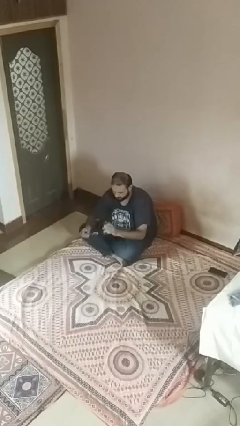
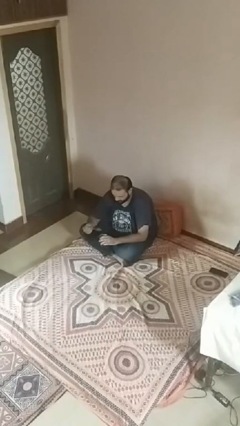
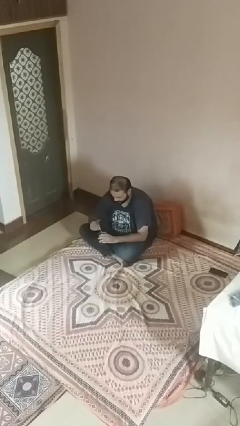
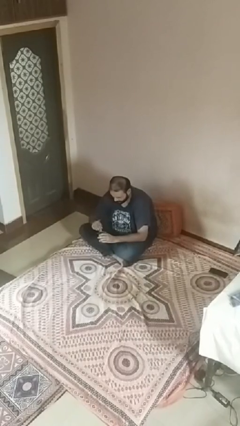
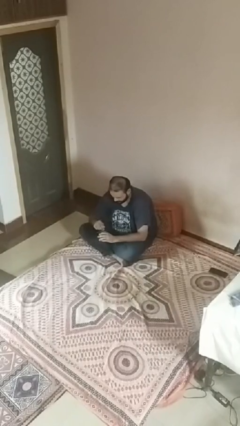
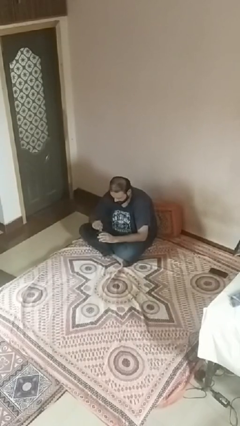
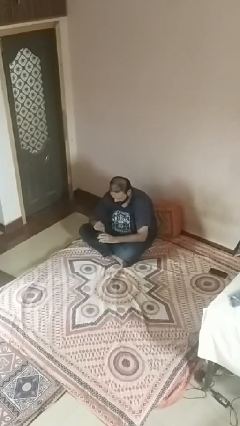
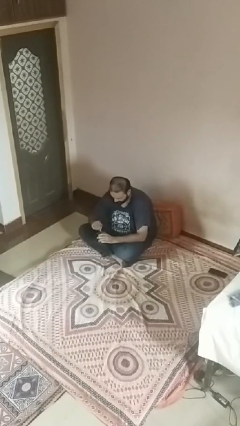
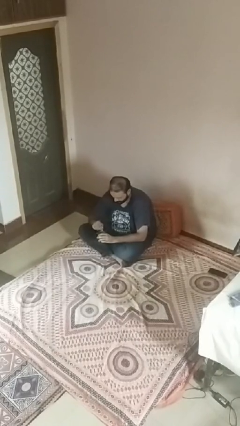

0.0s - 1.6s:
person stirs mug

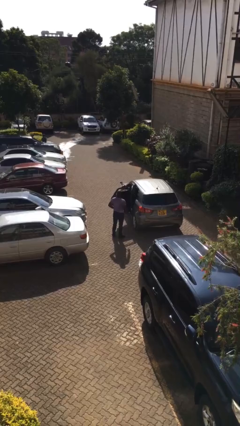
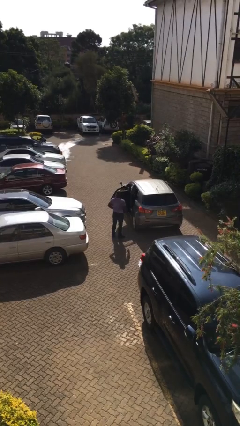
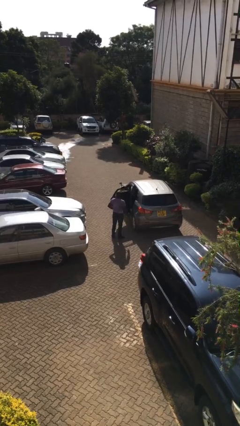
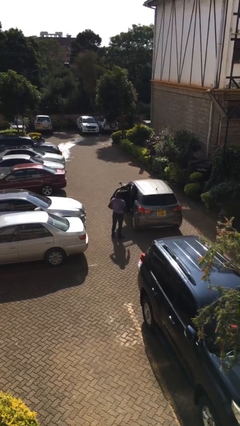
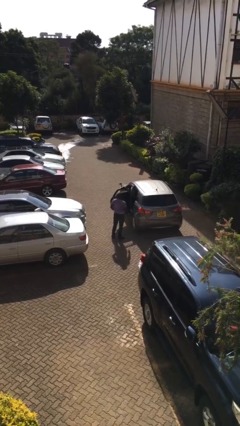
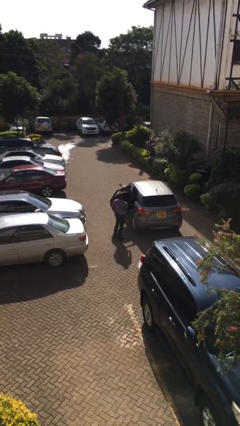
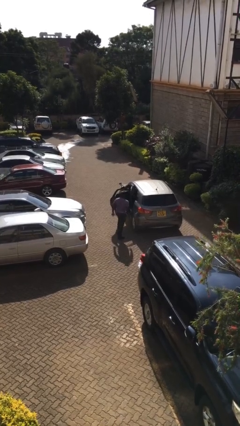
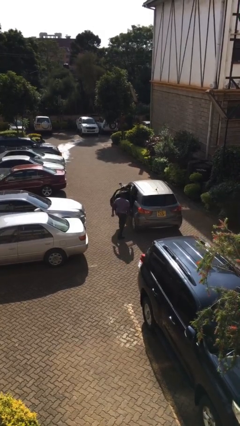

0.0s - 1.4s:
person exits car

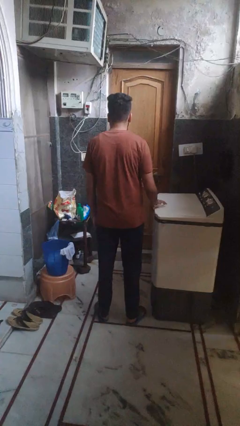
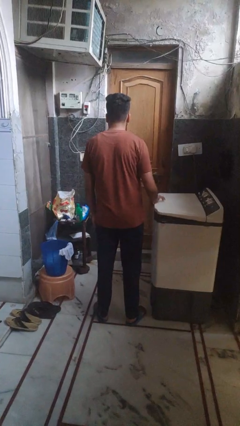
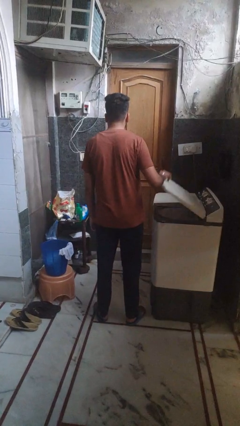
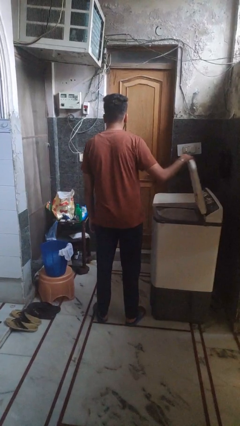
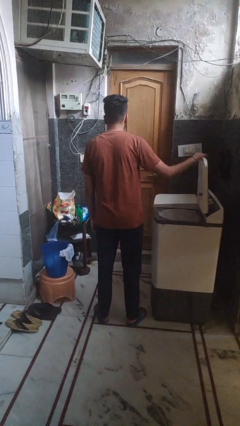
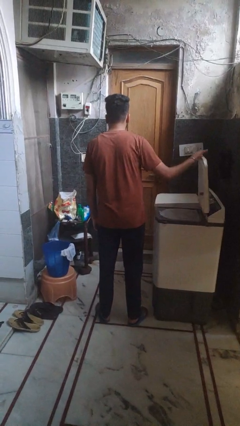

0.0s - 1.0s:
person opens clothes washer

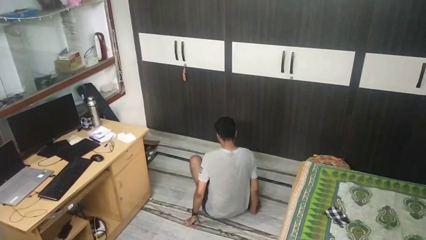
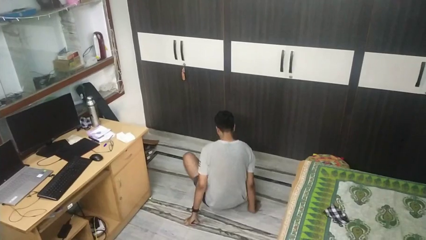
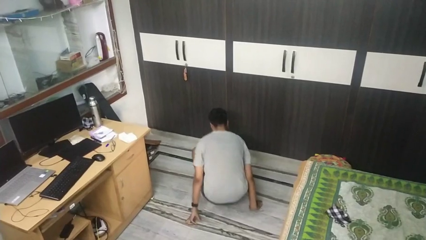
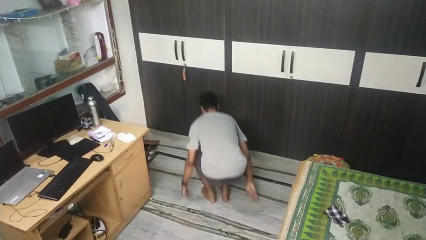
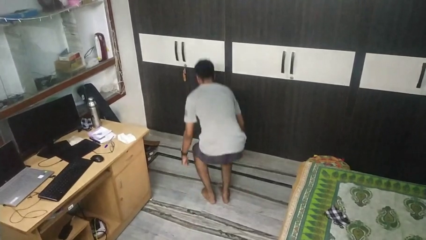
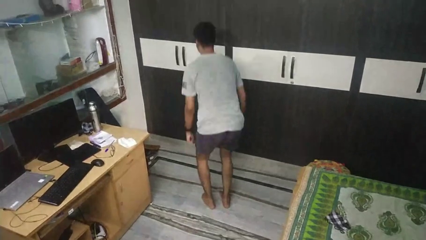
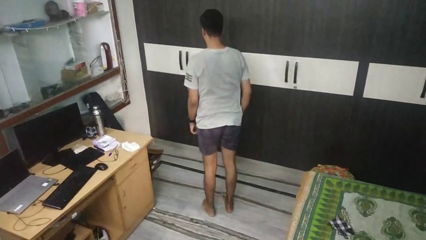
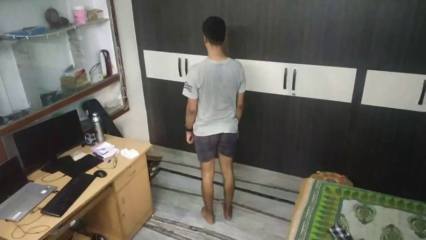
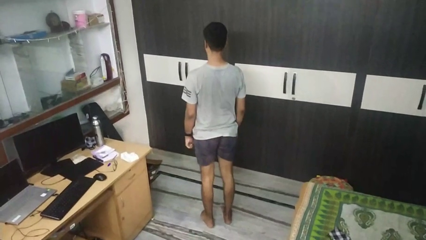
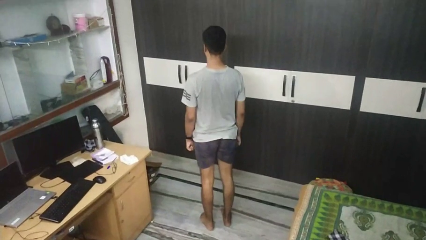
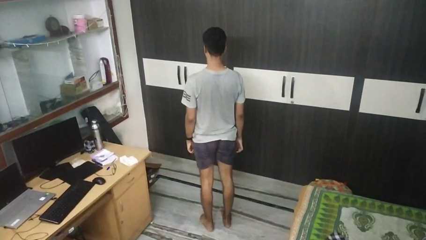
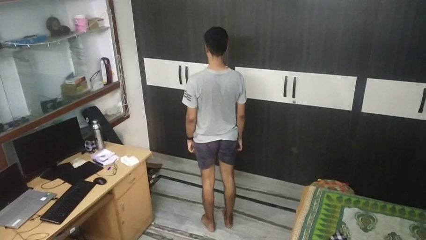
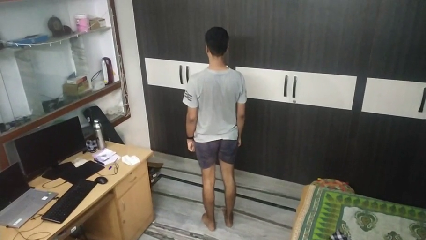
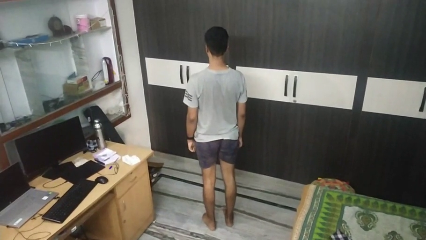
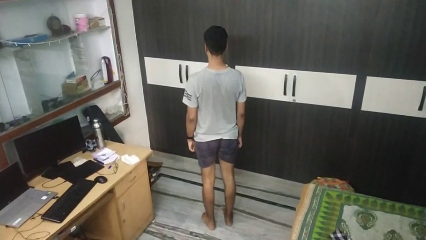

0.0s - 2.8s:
person stands up from floor

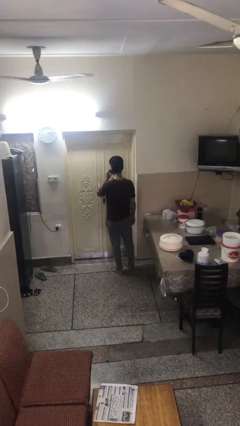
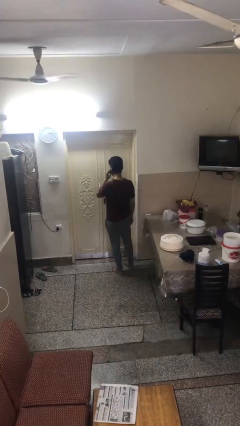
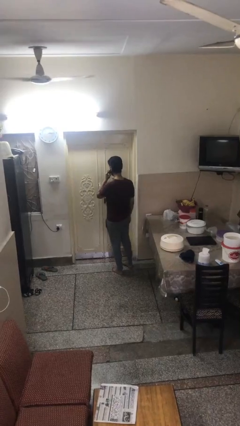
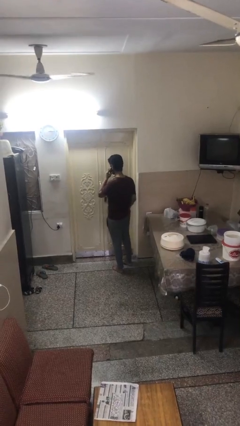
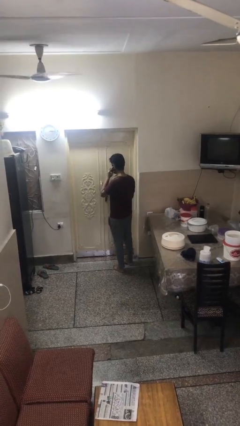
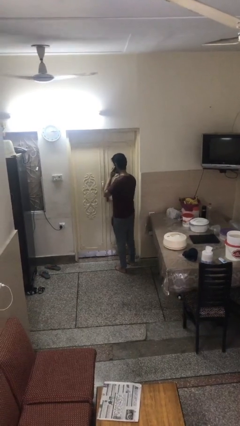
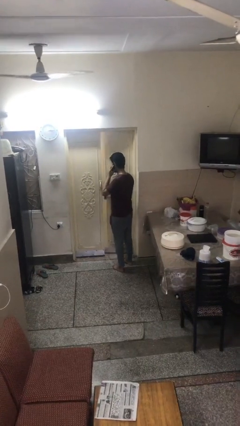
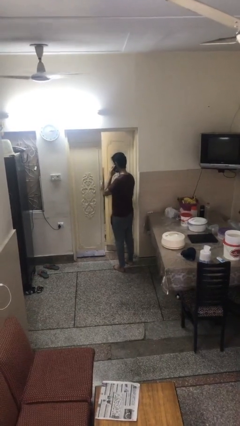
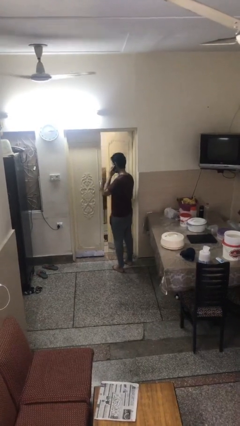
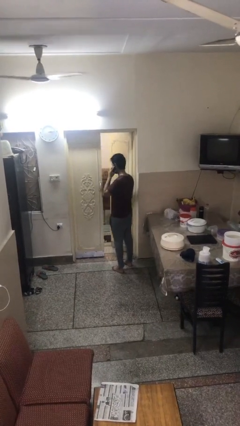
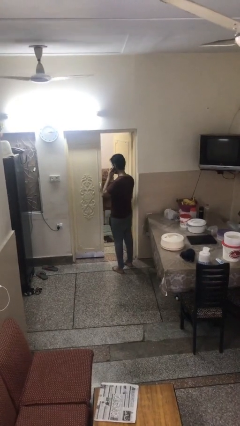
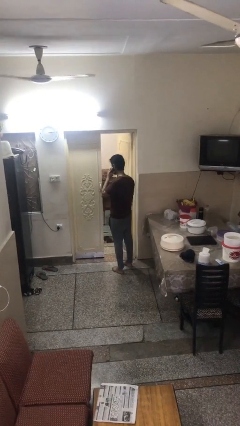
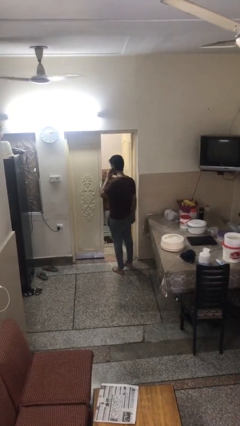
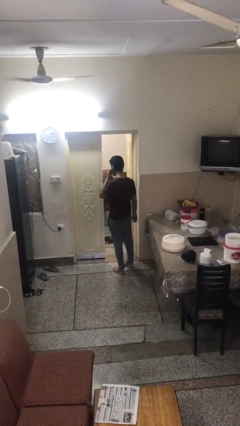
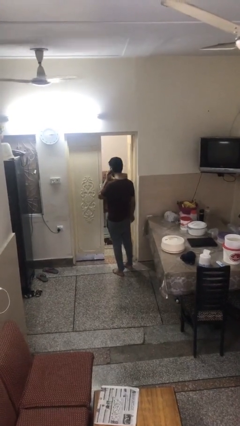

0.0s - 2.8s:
person opens facility door

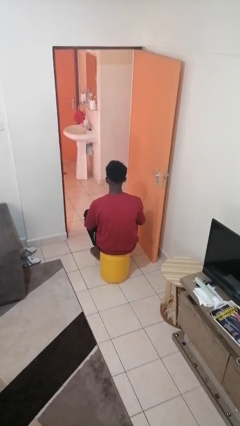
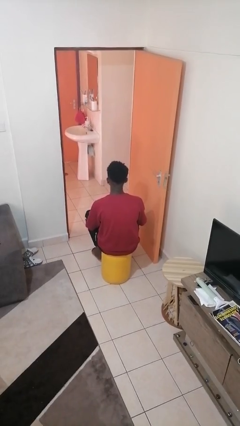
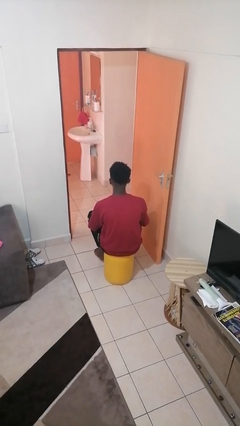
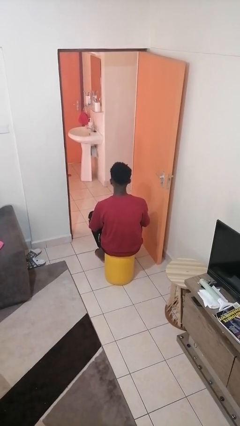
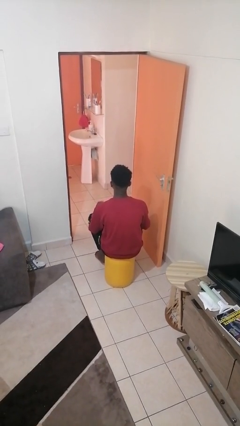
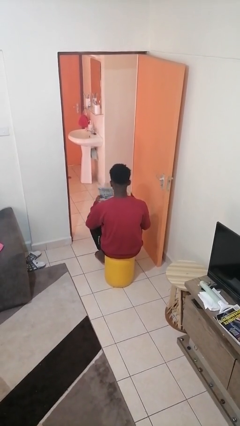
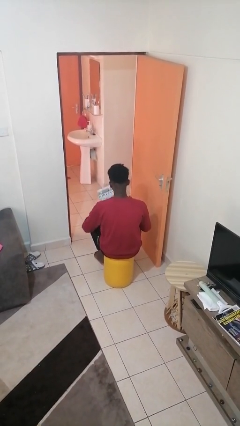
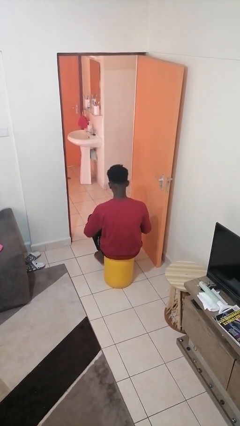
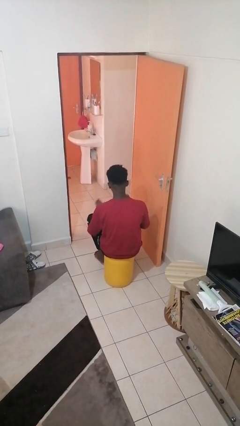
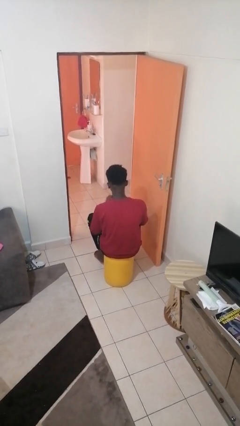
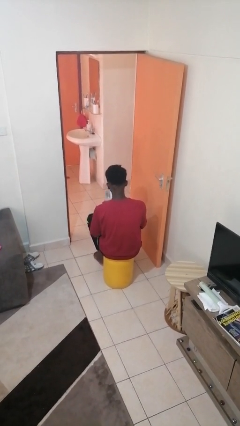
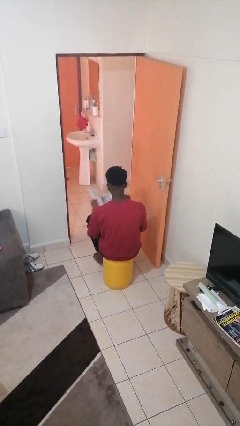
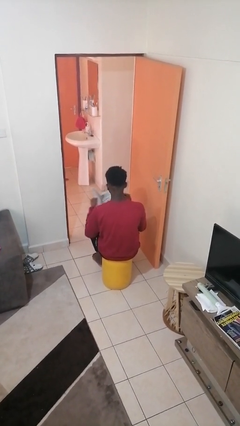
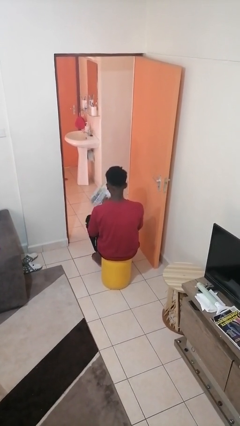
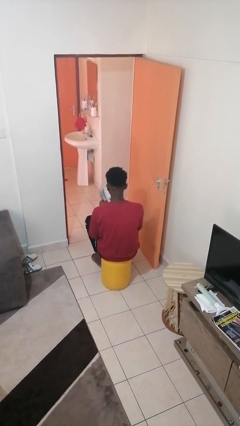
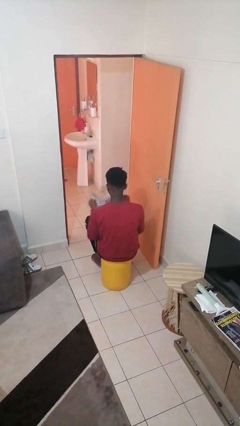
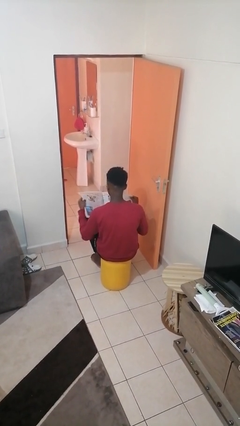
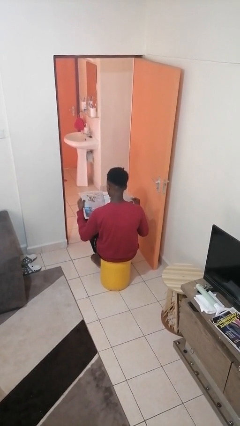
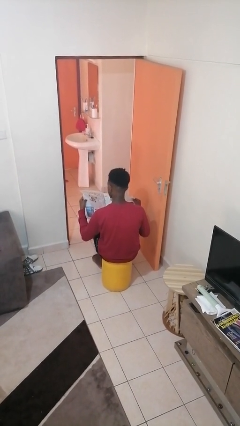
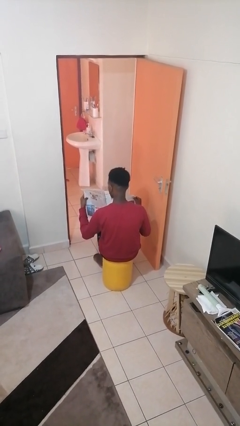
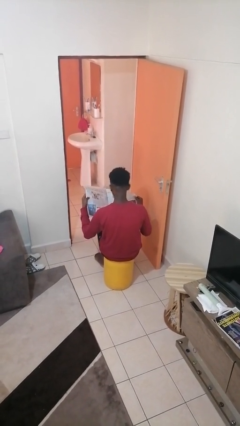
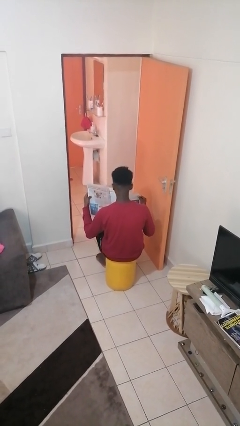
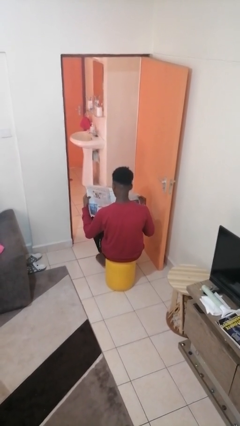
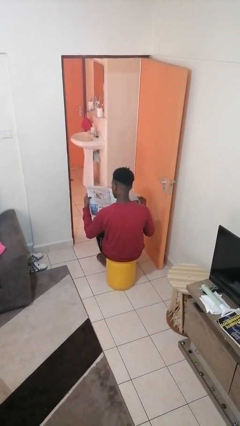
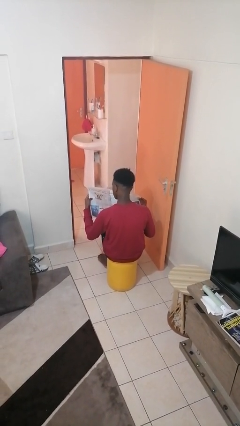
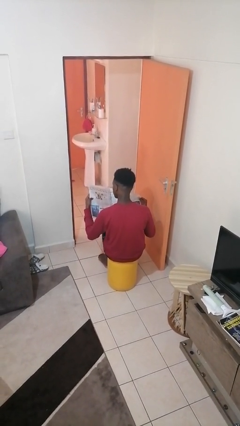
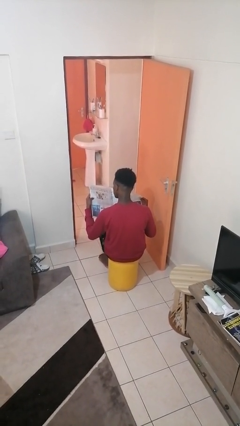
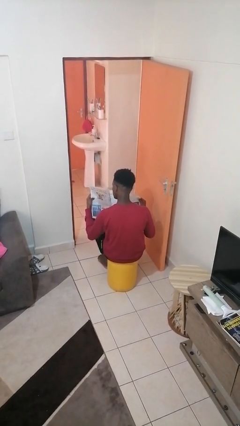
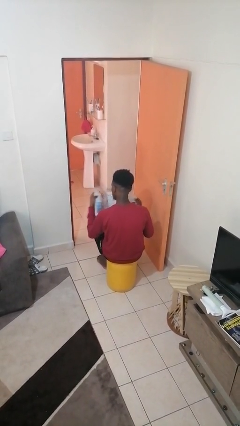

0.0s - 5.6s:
person reads newspaper

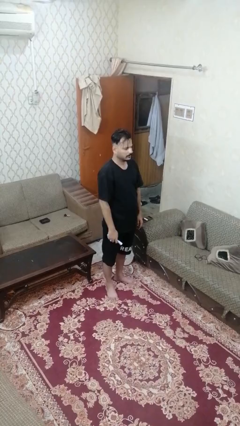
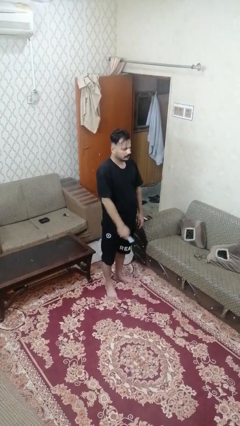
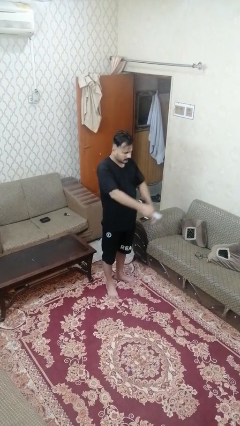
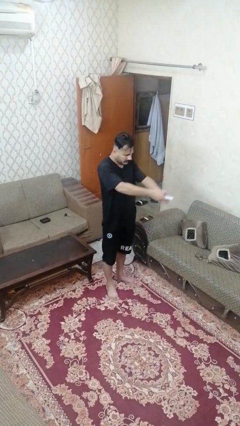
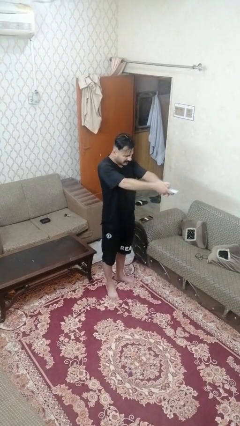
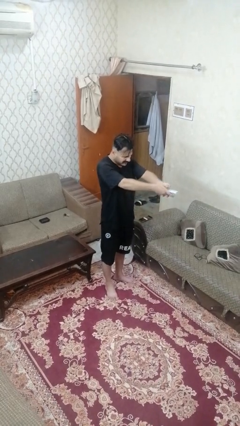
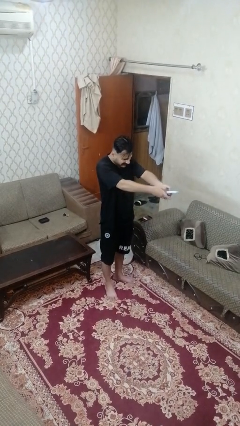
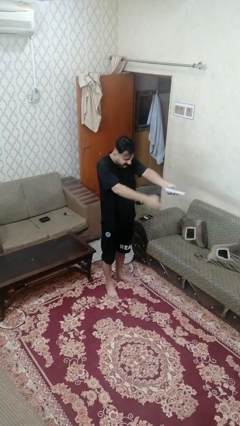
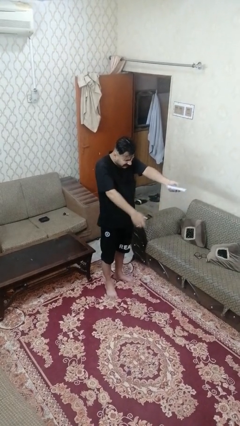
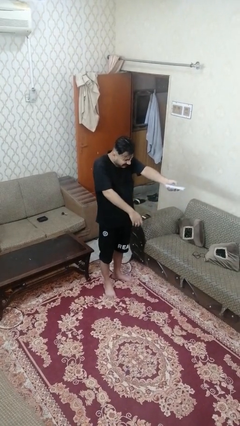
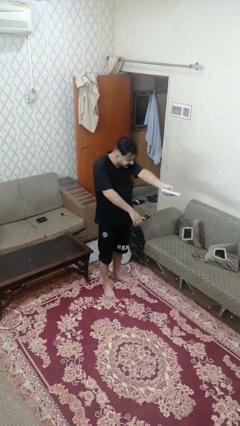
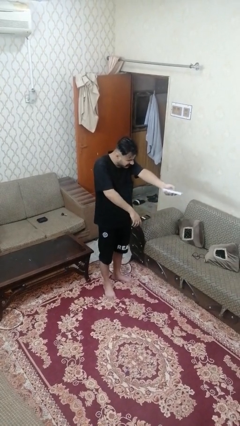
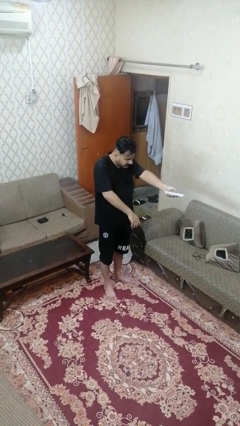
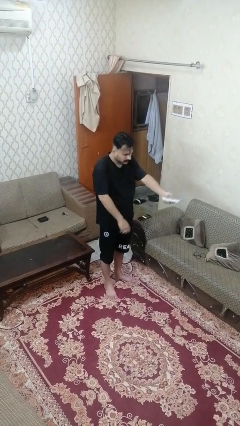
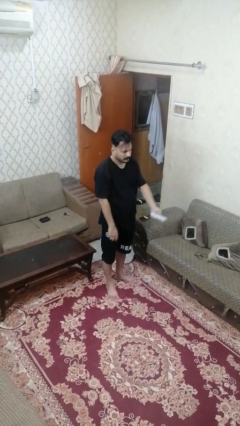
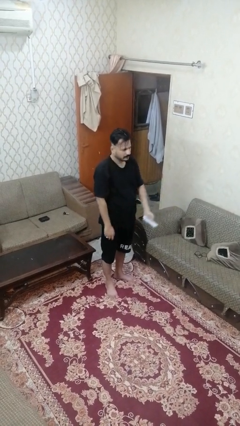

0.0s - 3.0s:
person uses television remote
